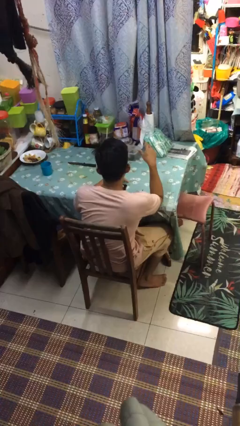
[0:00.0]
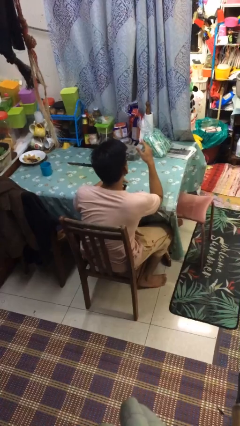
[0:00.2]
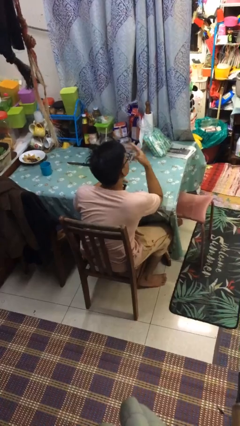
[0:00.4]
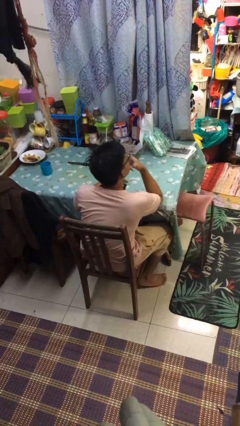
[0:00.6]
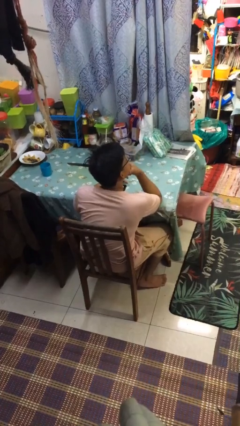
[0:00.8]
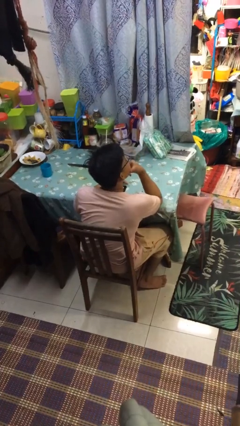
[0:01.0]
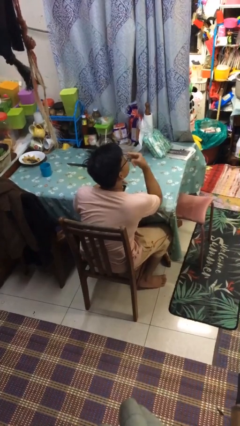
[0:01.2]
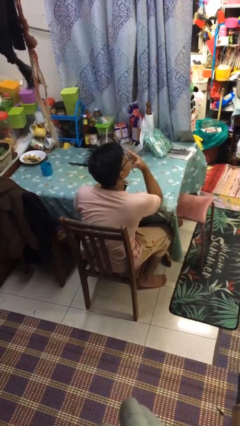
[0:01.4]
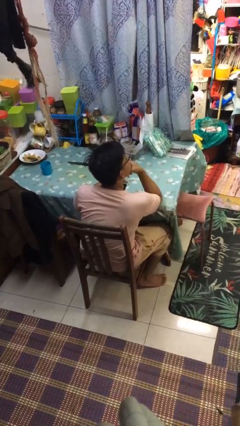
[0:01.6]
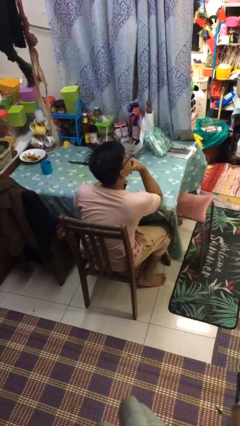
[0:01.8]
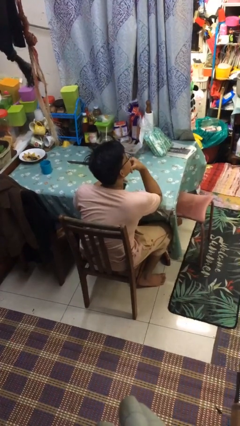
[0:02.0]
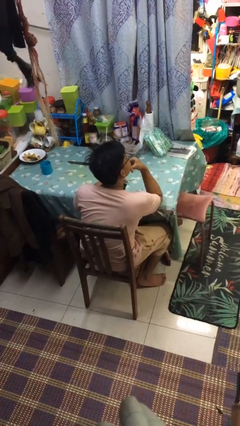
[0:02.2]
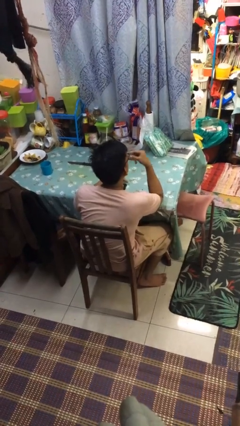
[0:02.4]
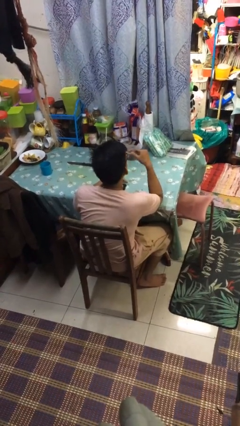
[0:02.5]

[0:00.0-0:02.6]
person strokes chin

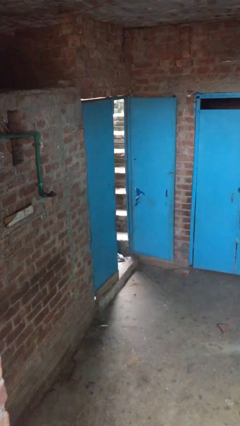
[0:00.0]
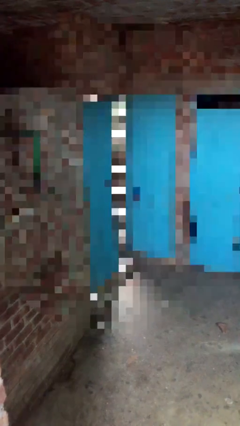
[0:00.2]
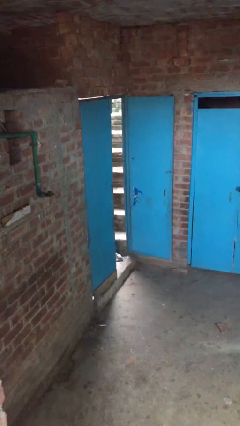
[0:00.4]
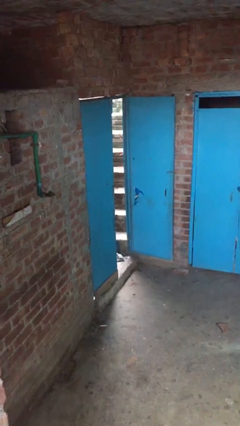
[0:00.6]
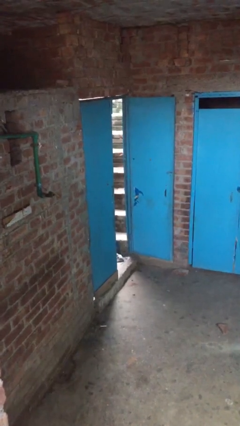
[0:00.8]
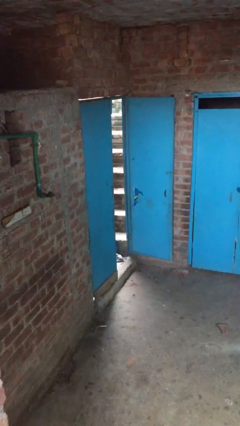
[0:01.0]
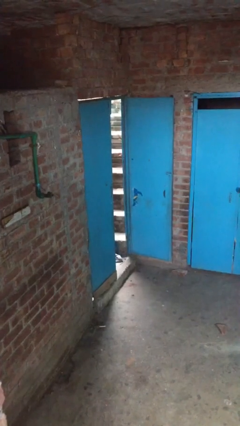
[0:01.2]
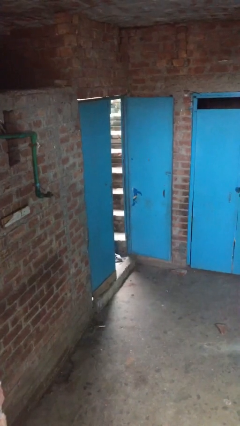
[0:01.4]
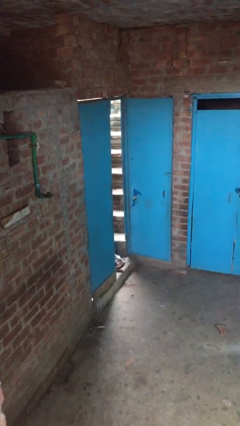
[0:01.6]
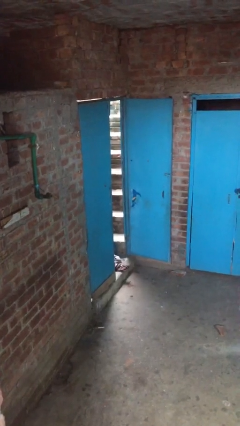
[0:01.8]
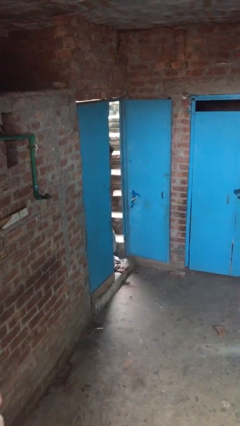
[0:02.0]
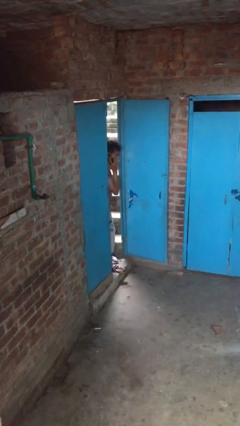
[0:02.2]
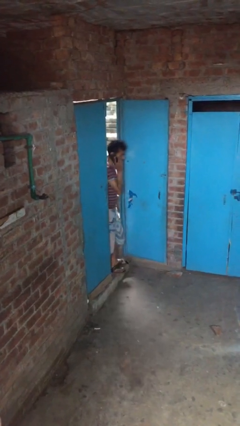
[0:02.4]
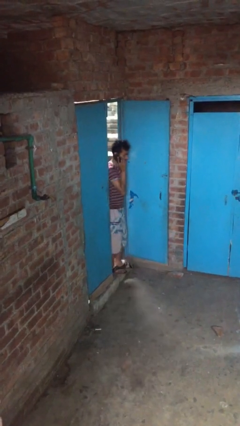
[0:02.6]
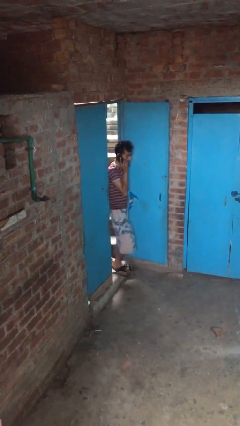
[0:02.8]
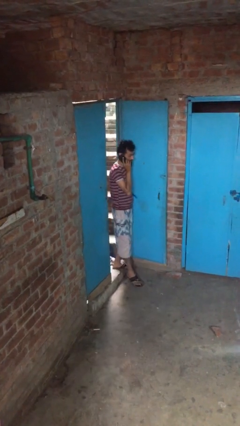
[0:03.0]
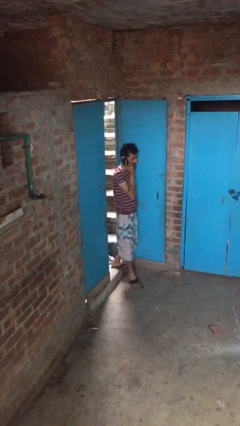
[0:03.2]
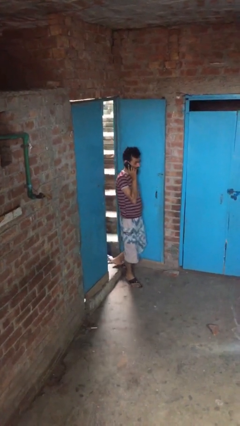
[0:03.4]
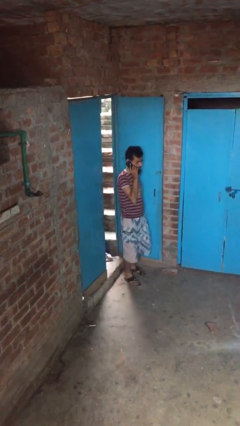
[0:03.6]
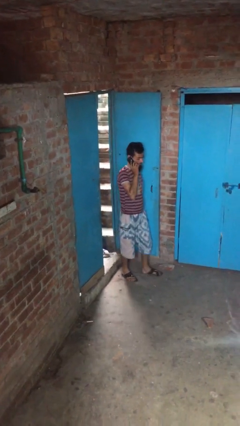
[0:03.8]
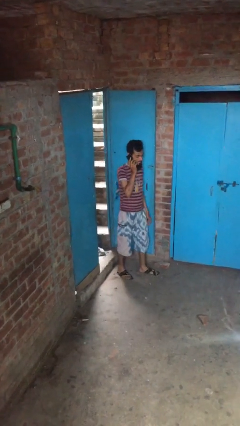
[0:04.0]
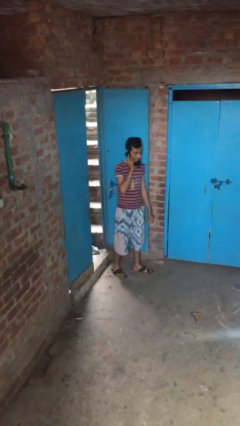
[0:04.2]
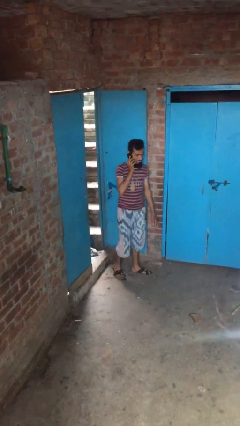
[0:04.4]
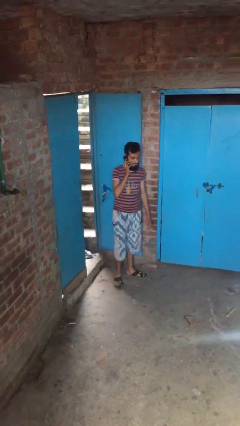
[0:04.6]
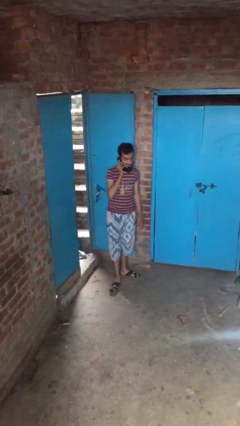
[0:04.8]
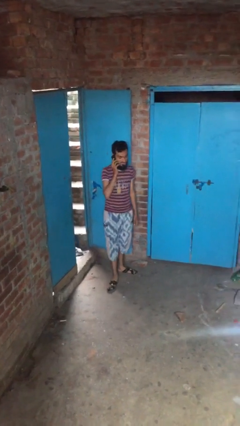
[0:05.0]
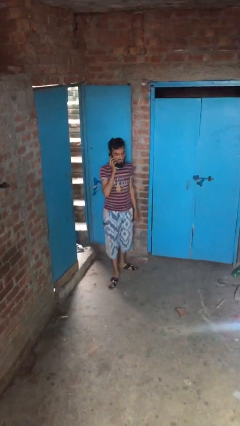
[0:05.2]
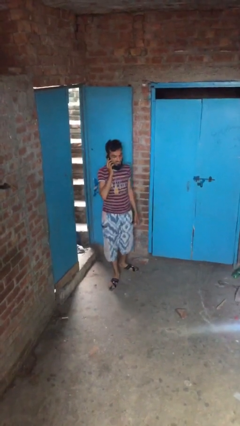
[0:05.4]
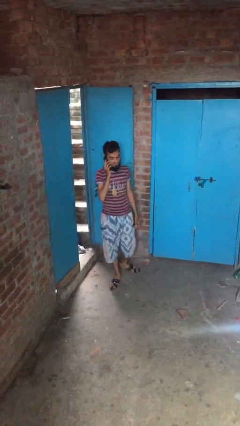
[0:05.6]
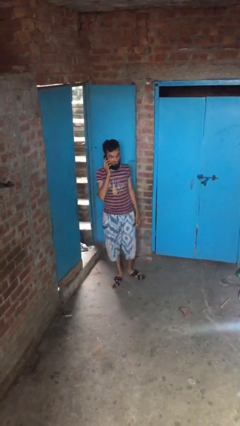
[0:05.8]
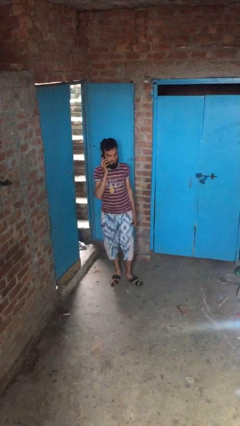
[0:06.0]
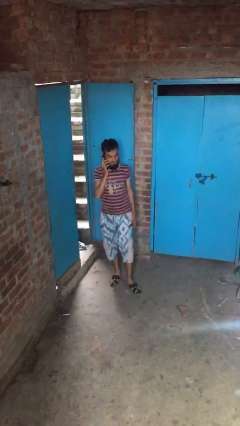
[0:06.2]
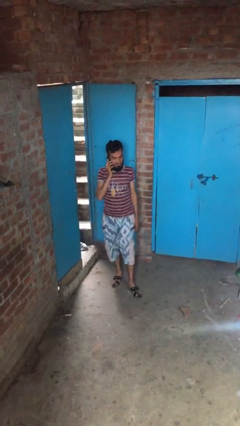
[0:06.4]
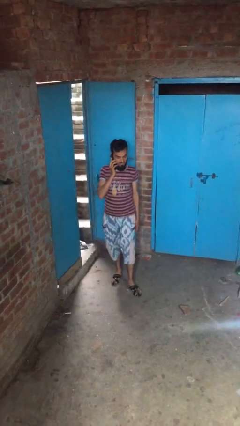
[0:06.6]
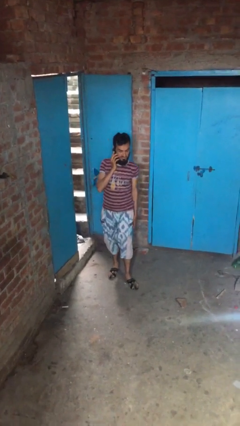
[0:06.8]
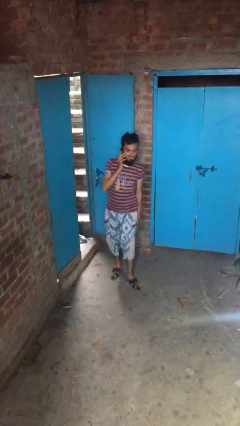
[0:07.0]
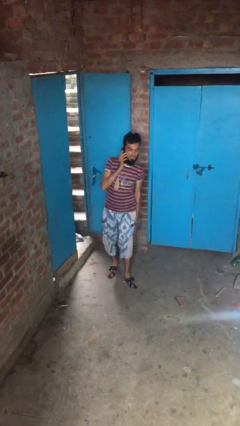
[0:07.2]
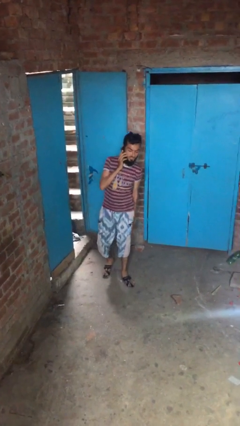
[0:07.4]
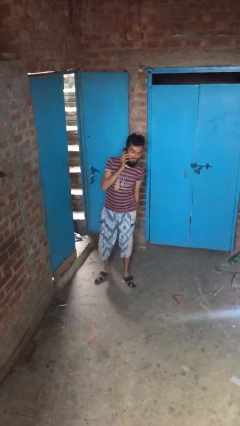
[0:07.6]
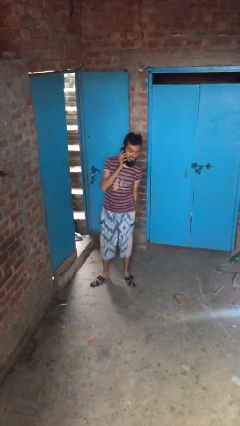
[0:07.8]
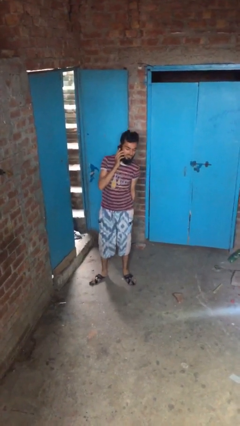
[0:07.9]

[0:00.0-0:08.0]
person enters scene through structure

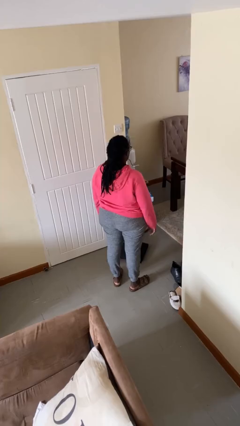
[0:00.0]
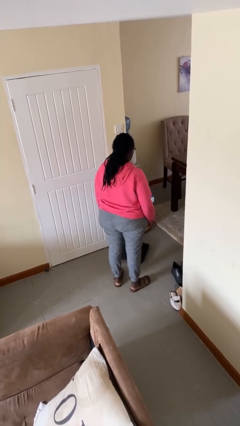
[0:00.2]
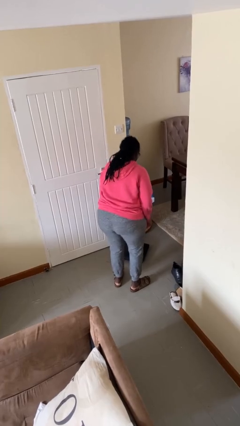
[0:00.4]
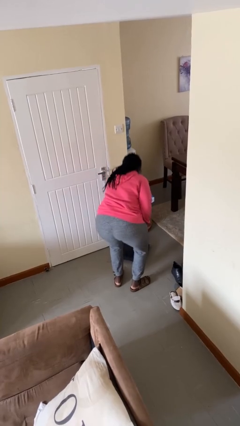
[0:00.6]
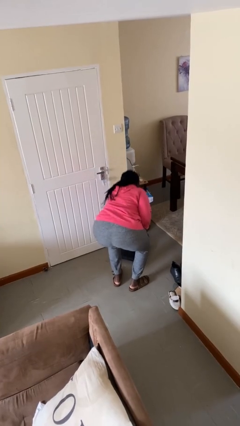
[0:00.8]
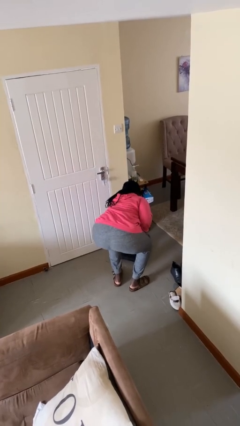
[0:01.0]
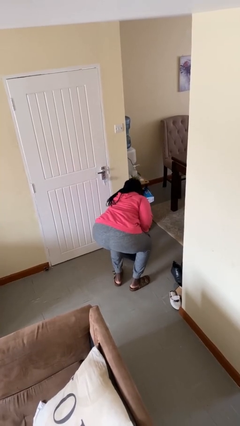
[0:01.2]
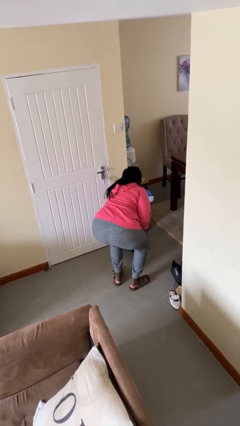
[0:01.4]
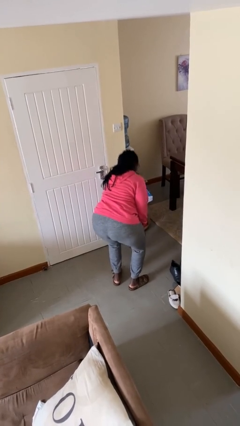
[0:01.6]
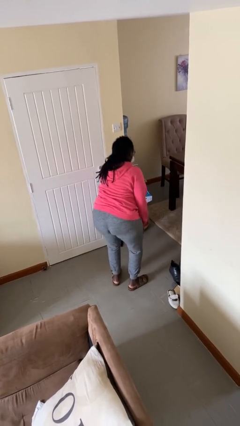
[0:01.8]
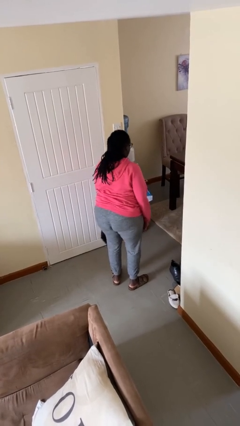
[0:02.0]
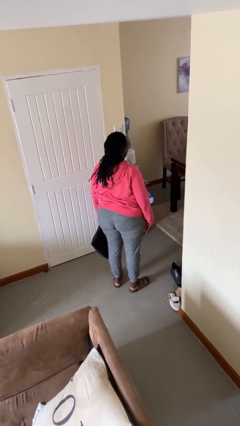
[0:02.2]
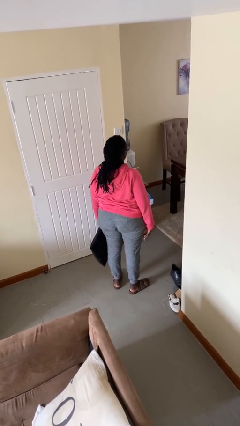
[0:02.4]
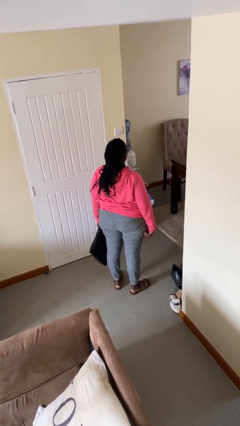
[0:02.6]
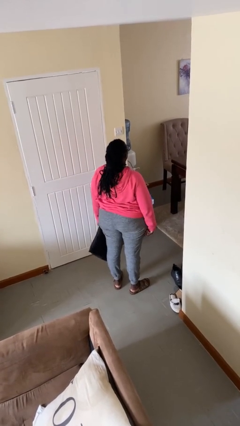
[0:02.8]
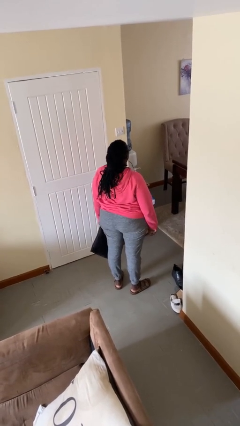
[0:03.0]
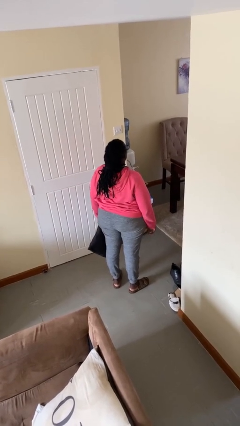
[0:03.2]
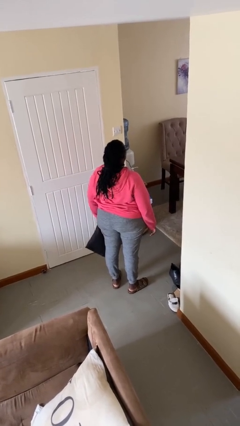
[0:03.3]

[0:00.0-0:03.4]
person picks up object from floor

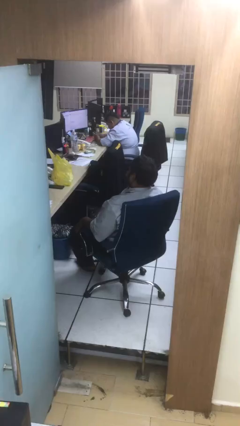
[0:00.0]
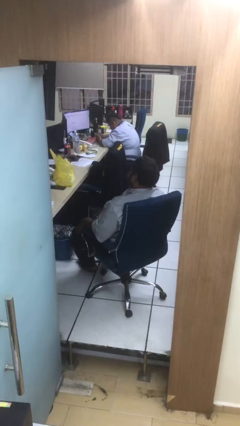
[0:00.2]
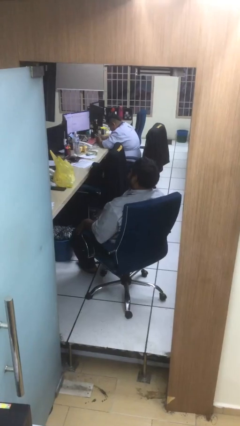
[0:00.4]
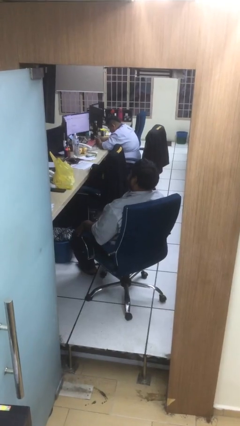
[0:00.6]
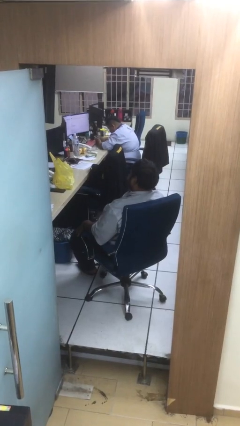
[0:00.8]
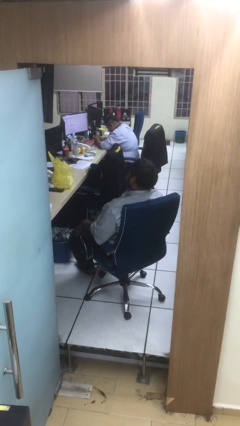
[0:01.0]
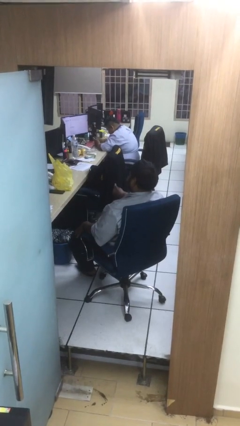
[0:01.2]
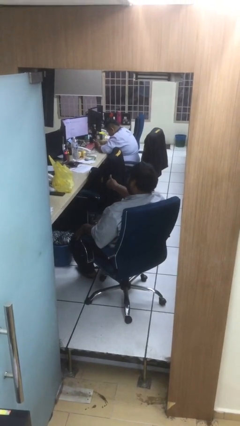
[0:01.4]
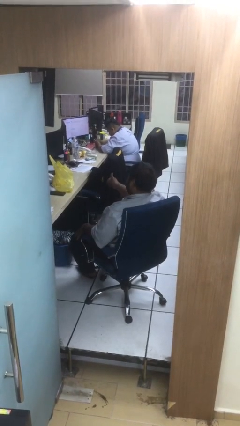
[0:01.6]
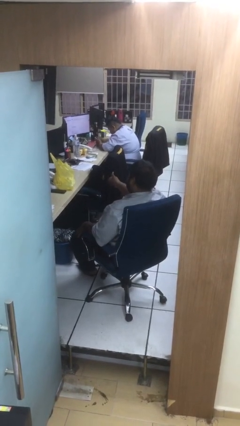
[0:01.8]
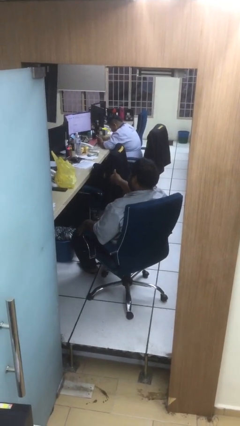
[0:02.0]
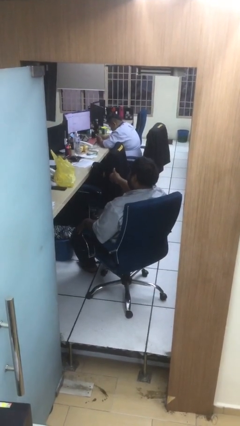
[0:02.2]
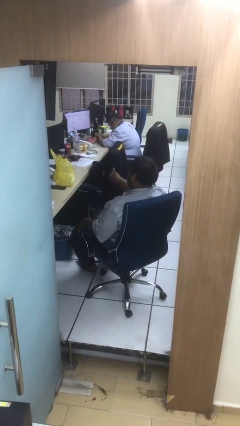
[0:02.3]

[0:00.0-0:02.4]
person gestures thumbs up

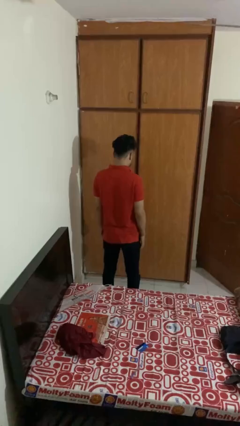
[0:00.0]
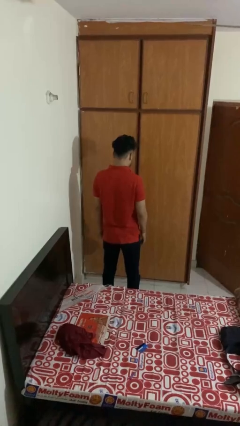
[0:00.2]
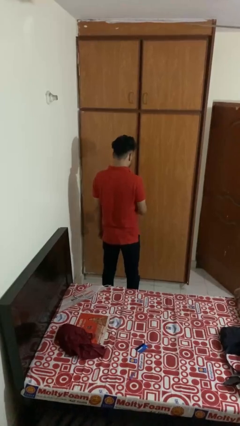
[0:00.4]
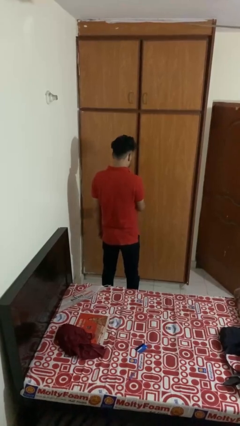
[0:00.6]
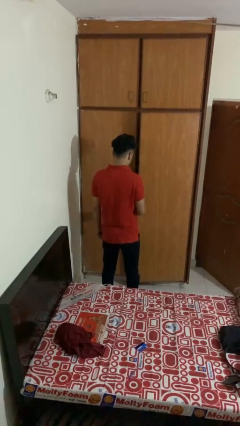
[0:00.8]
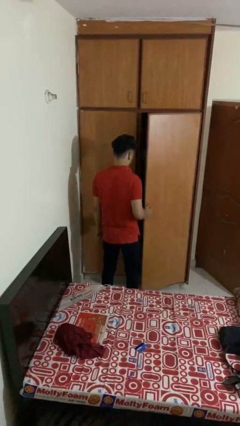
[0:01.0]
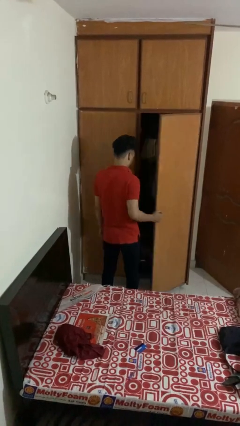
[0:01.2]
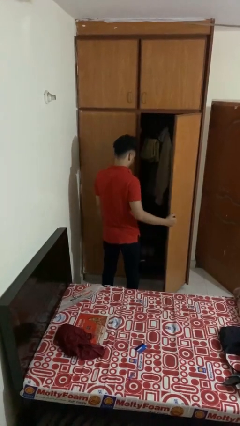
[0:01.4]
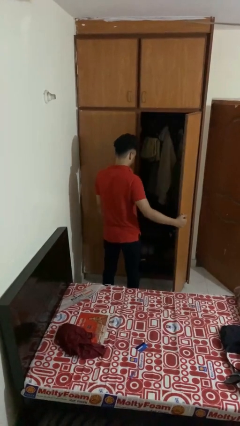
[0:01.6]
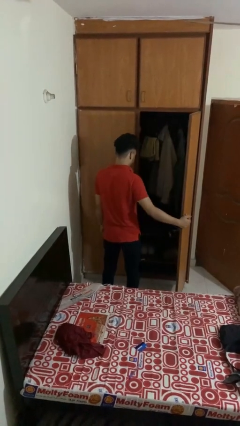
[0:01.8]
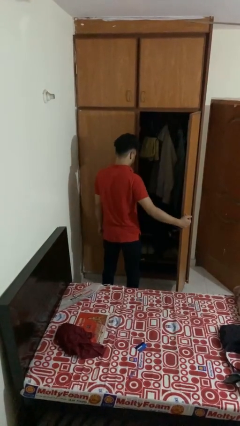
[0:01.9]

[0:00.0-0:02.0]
person opens closet door
